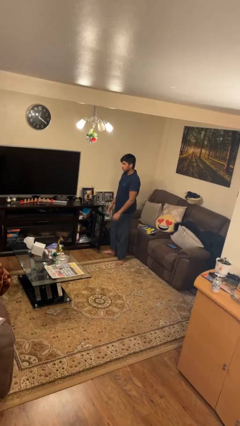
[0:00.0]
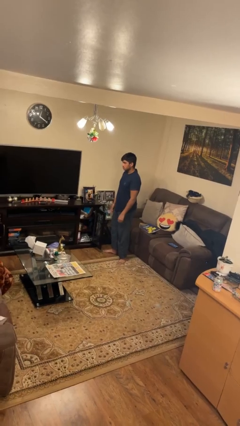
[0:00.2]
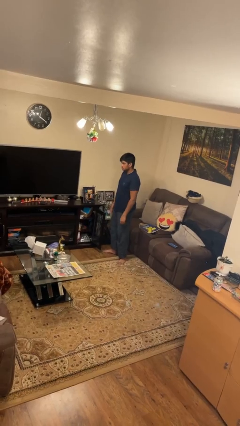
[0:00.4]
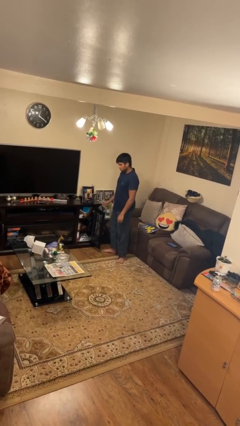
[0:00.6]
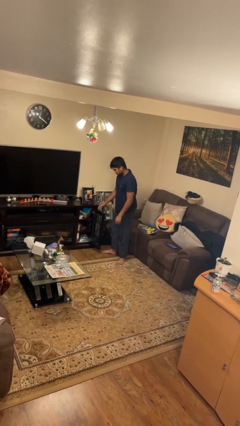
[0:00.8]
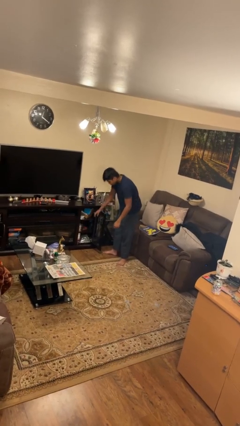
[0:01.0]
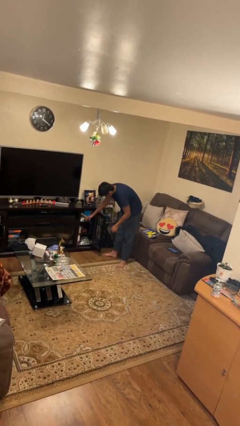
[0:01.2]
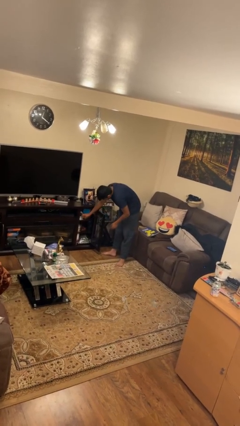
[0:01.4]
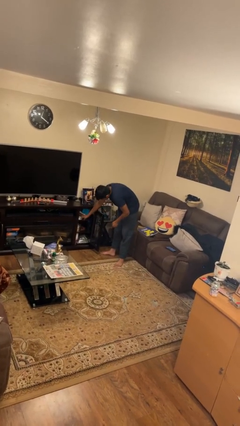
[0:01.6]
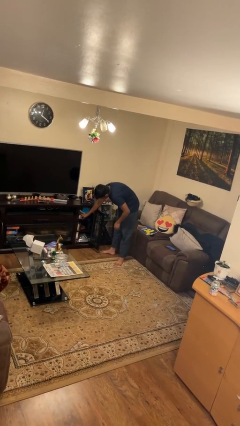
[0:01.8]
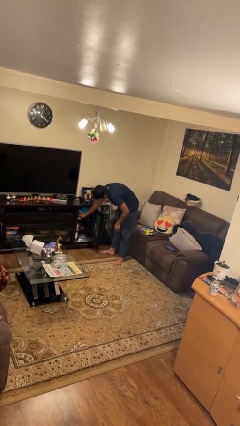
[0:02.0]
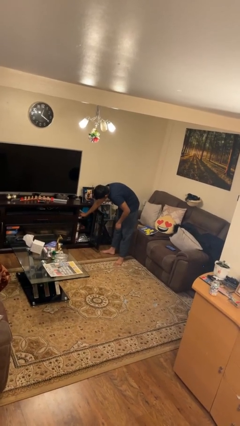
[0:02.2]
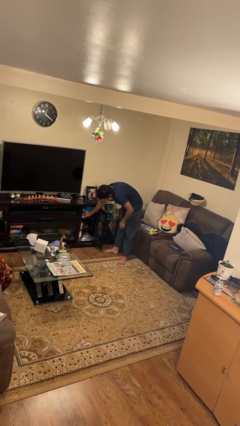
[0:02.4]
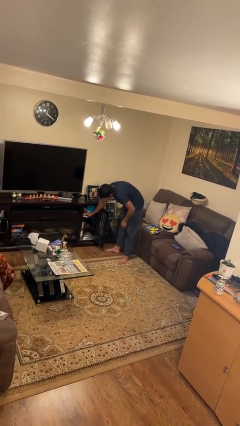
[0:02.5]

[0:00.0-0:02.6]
person searches in cabinet

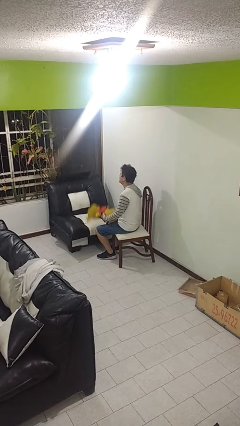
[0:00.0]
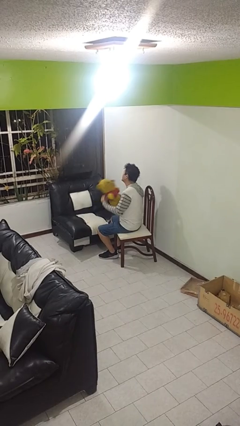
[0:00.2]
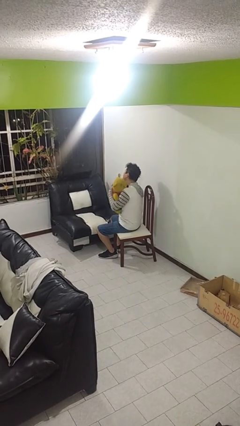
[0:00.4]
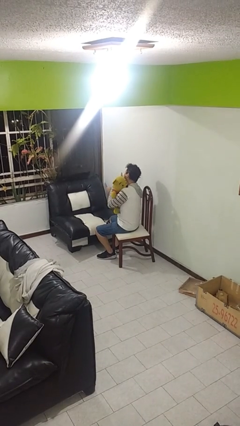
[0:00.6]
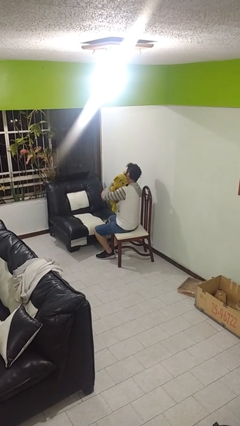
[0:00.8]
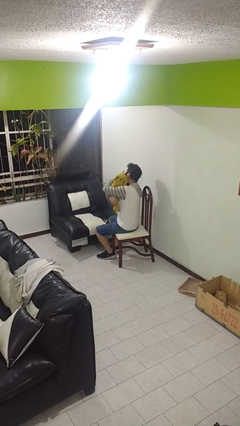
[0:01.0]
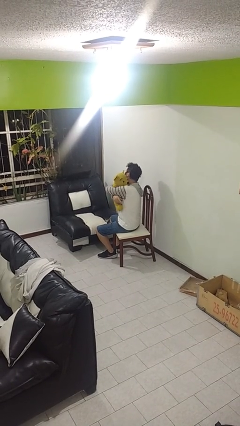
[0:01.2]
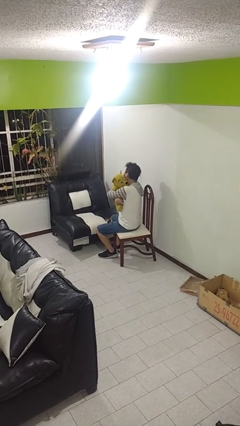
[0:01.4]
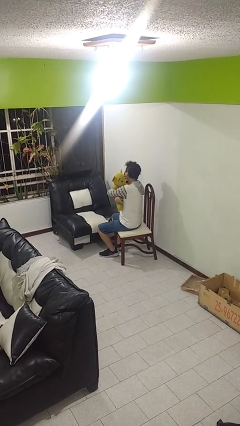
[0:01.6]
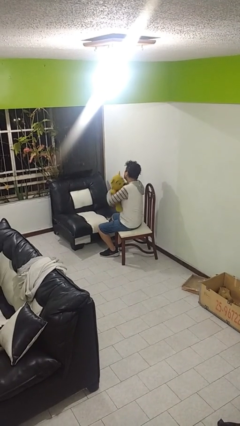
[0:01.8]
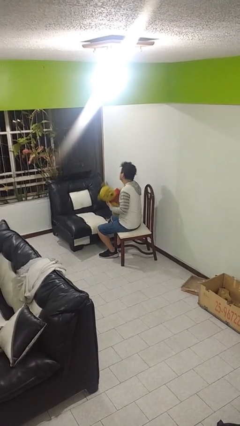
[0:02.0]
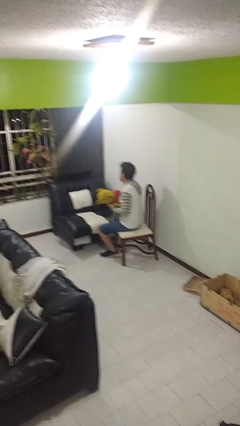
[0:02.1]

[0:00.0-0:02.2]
person hugs stuffed animal

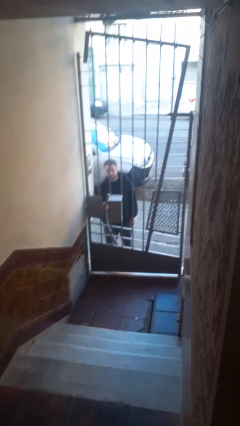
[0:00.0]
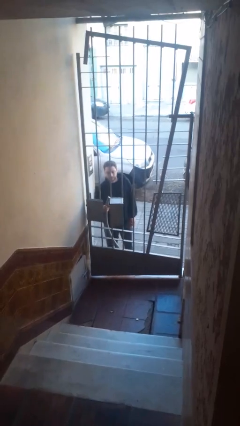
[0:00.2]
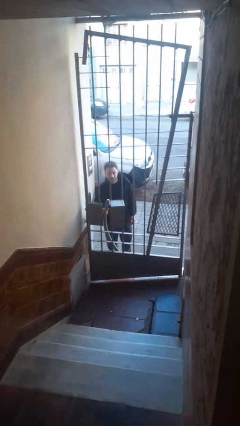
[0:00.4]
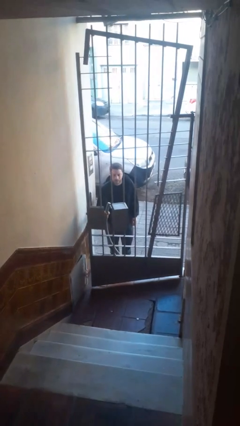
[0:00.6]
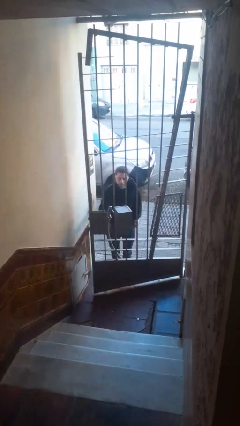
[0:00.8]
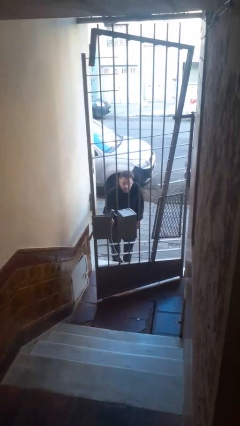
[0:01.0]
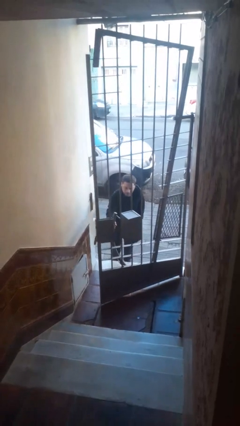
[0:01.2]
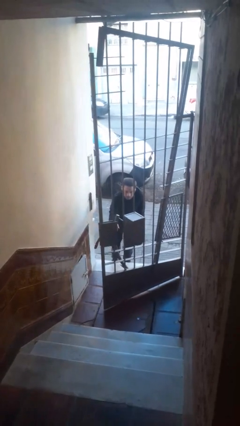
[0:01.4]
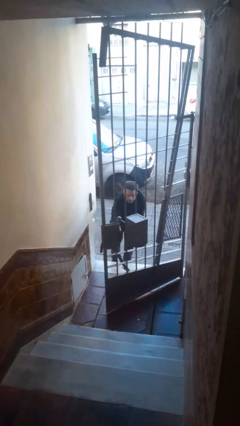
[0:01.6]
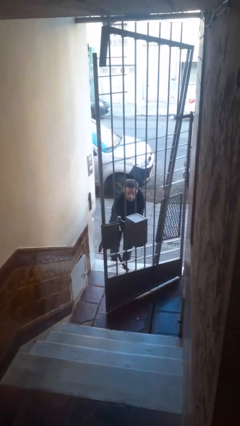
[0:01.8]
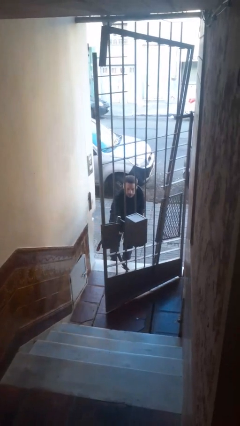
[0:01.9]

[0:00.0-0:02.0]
person opens gate

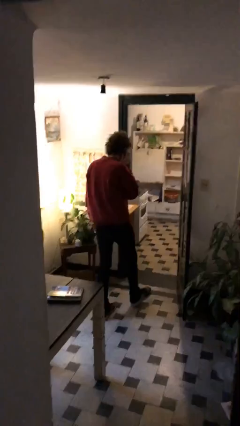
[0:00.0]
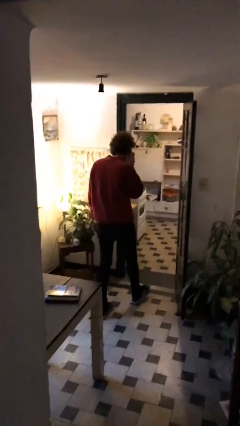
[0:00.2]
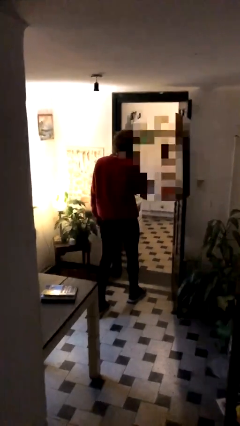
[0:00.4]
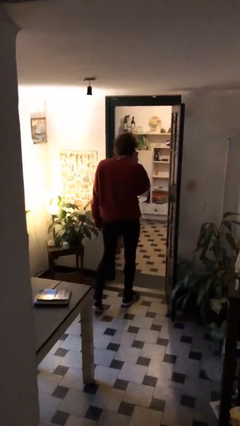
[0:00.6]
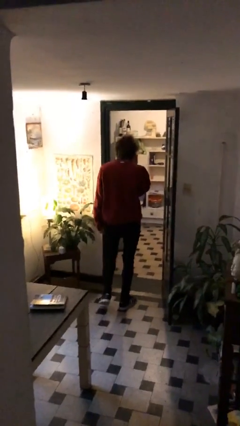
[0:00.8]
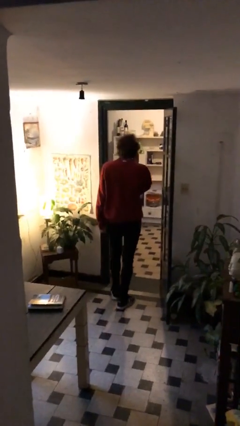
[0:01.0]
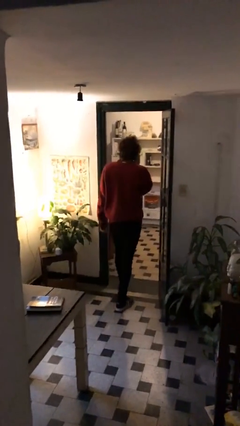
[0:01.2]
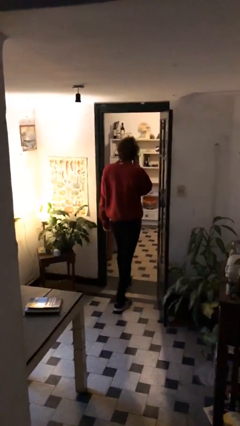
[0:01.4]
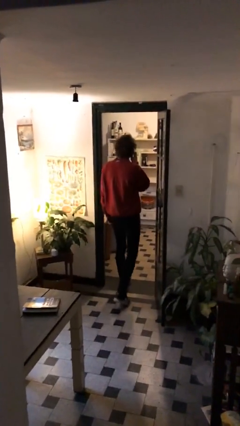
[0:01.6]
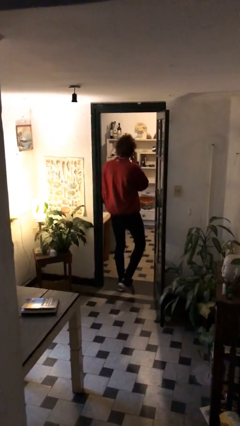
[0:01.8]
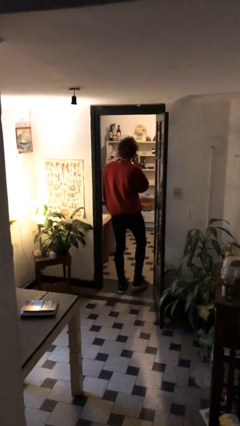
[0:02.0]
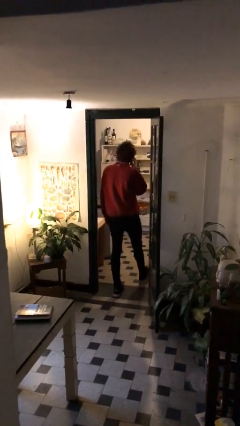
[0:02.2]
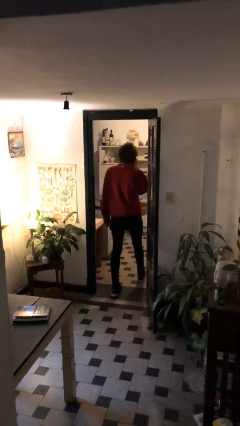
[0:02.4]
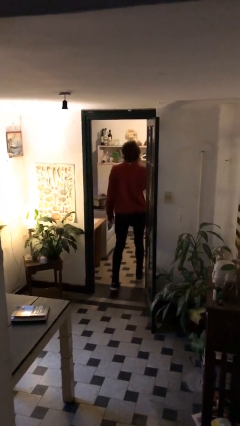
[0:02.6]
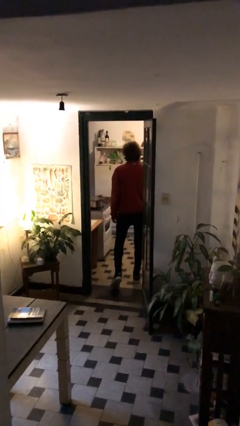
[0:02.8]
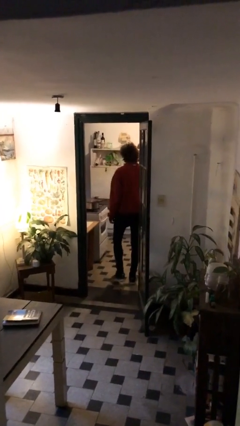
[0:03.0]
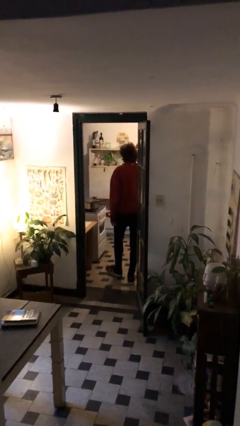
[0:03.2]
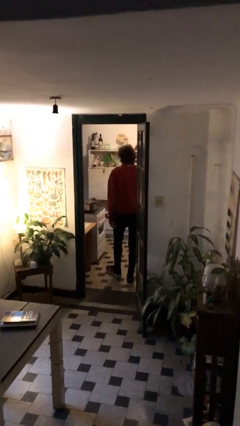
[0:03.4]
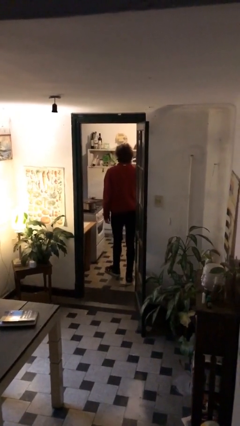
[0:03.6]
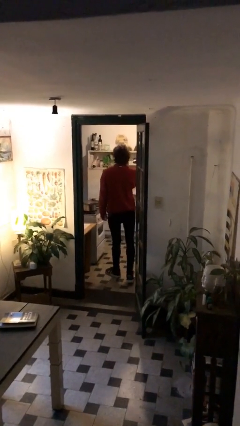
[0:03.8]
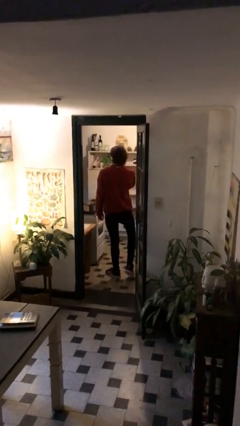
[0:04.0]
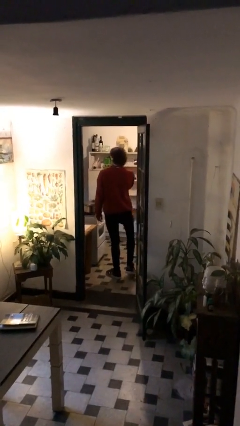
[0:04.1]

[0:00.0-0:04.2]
person exits scene through structure

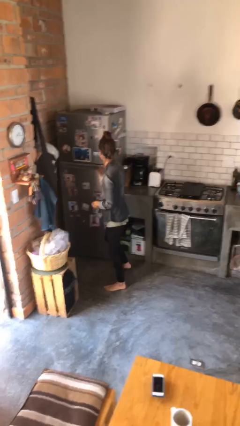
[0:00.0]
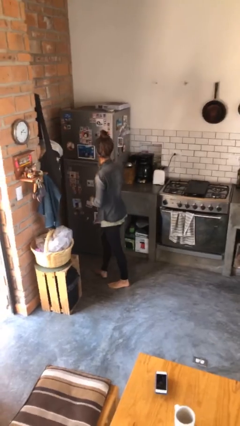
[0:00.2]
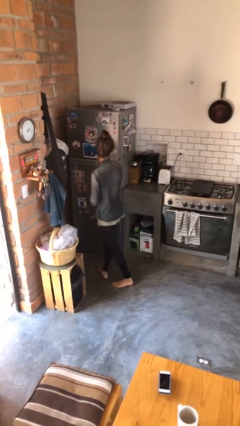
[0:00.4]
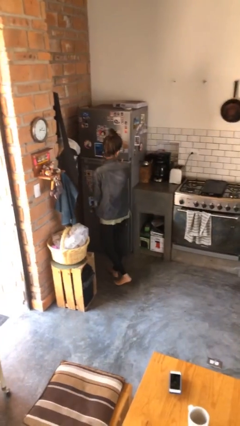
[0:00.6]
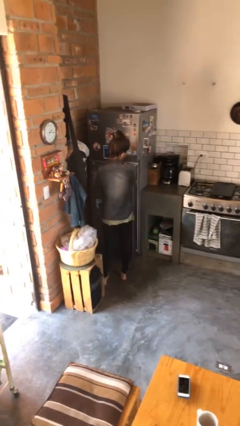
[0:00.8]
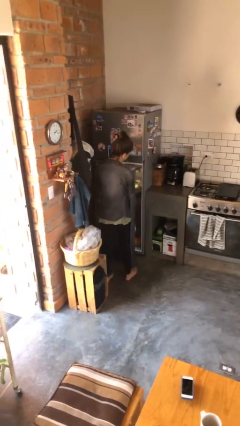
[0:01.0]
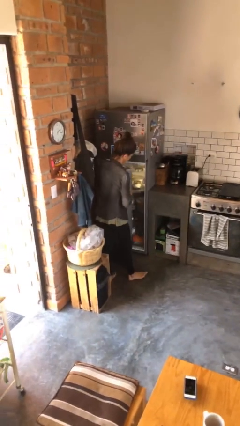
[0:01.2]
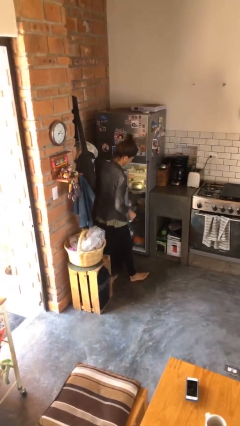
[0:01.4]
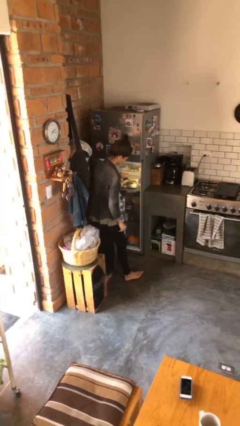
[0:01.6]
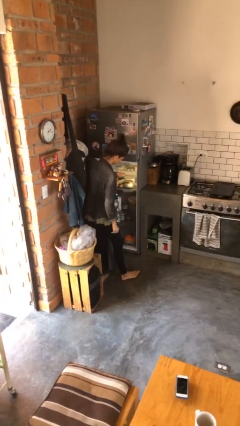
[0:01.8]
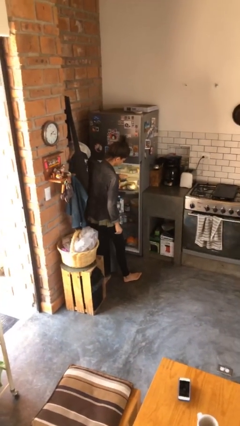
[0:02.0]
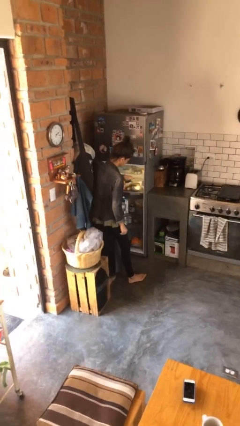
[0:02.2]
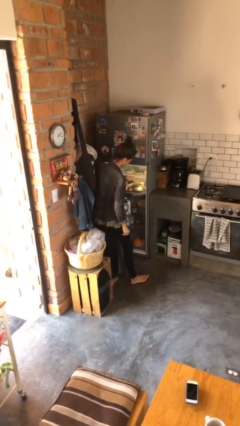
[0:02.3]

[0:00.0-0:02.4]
person opens refrigerator

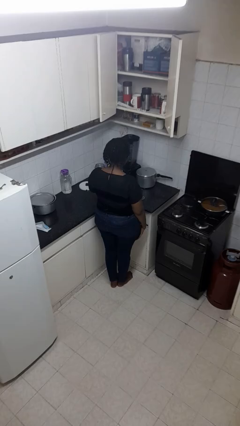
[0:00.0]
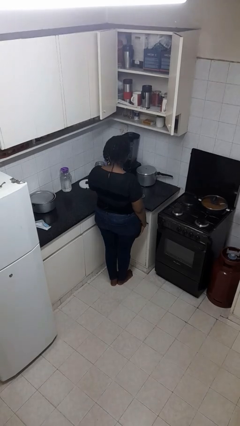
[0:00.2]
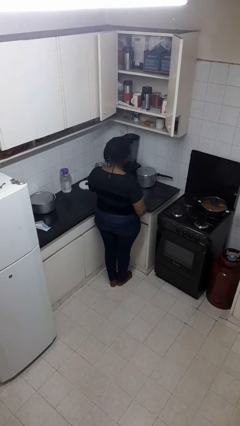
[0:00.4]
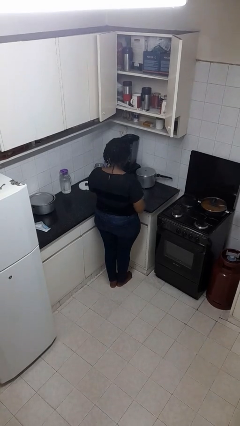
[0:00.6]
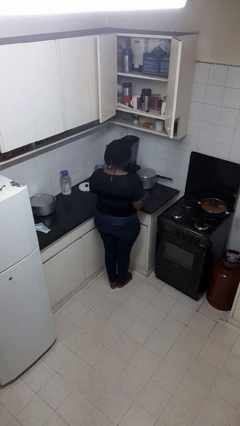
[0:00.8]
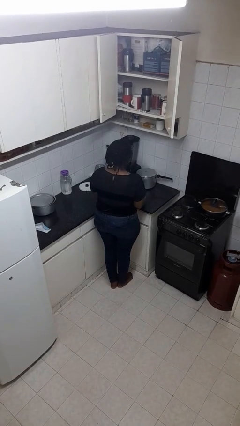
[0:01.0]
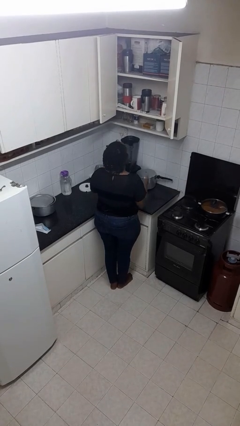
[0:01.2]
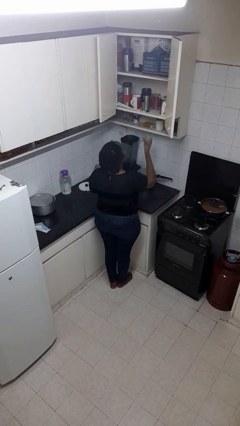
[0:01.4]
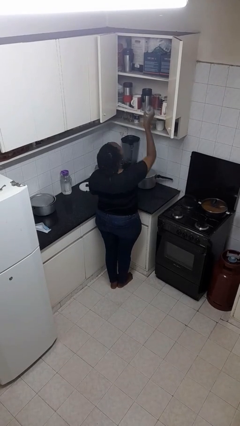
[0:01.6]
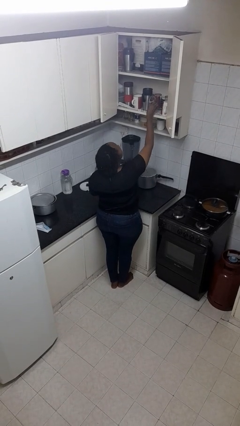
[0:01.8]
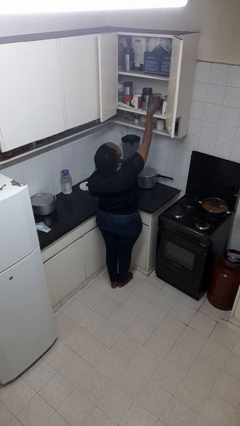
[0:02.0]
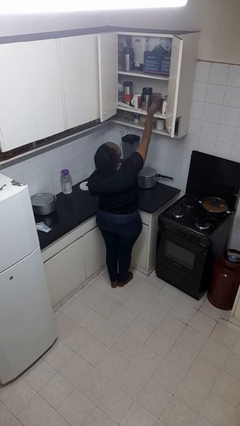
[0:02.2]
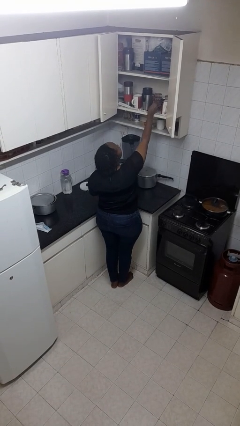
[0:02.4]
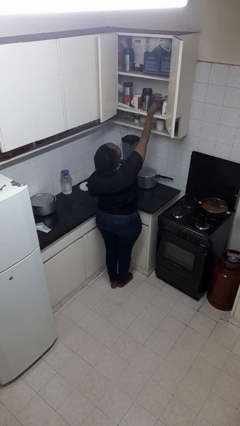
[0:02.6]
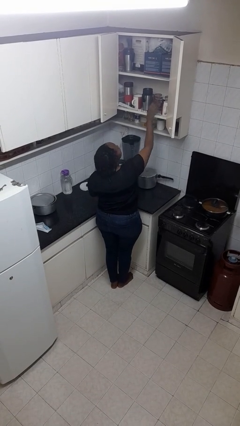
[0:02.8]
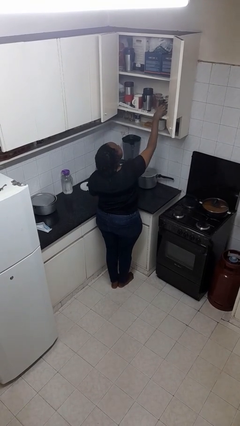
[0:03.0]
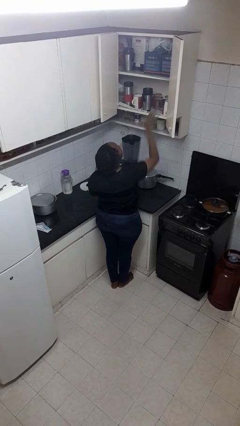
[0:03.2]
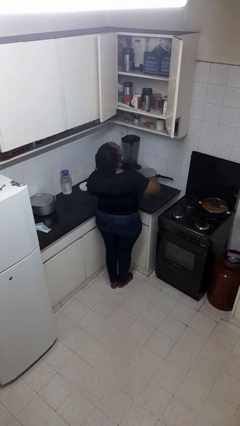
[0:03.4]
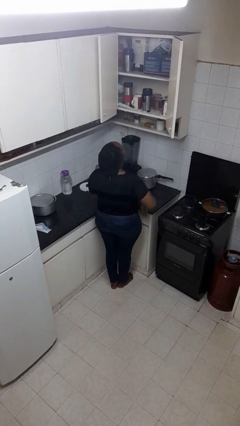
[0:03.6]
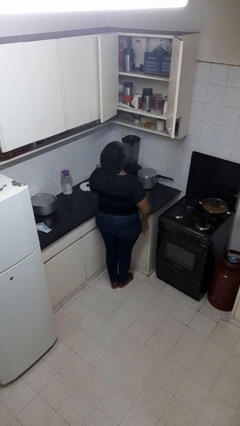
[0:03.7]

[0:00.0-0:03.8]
person puts object in cabinet
